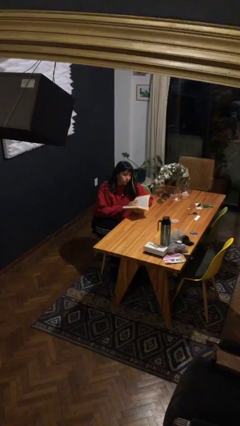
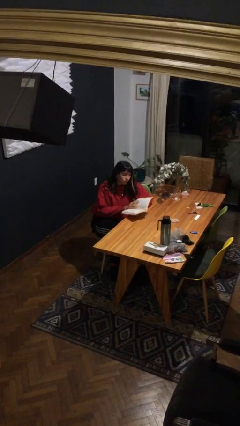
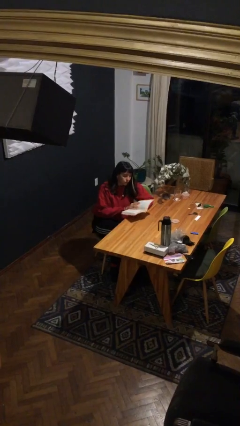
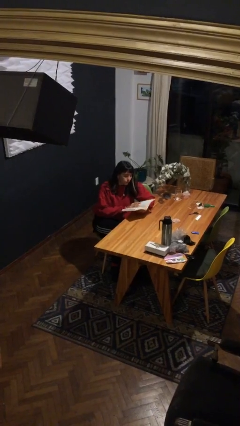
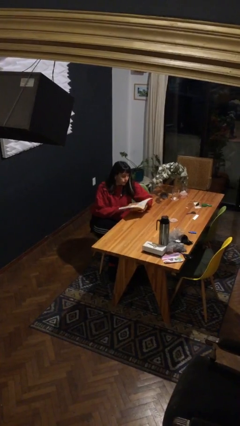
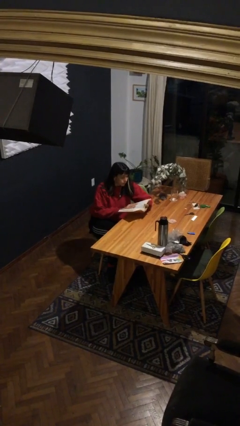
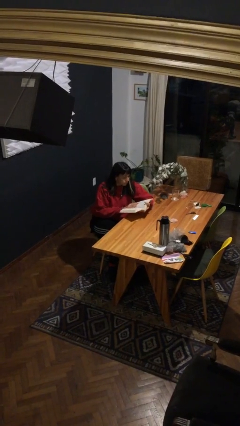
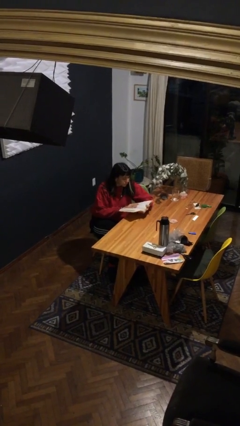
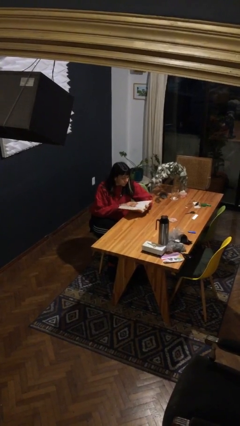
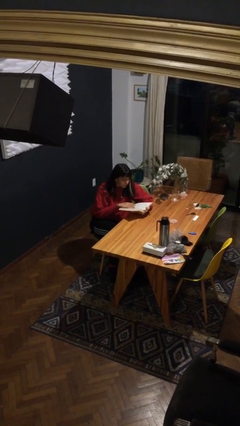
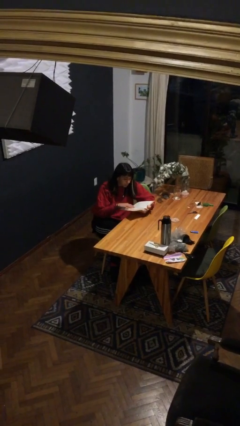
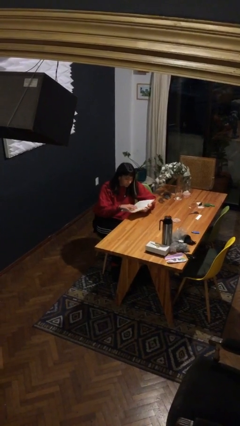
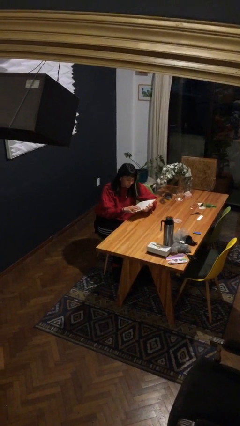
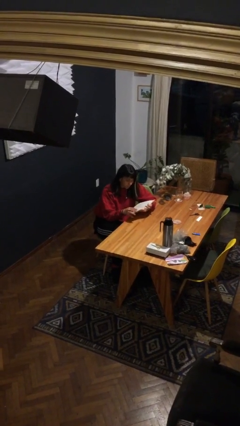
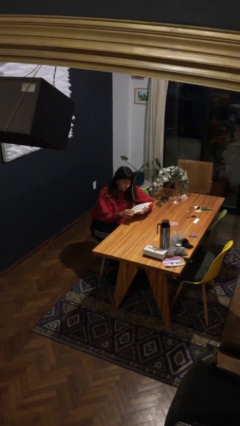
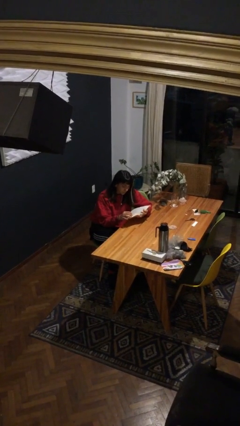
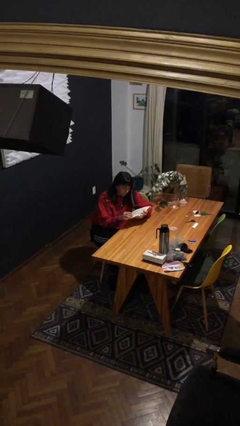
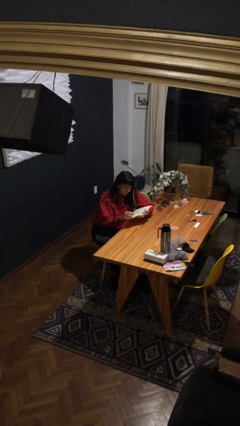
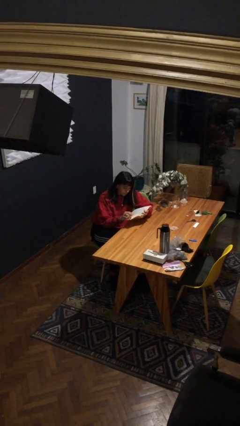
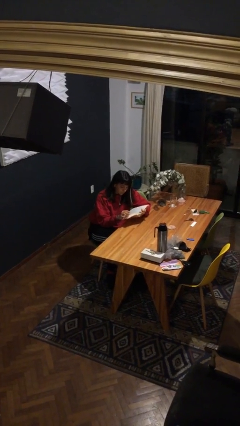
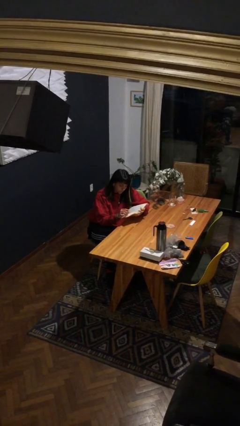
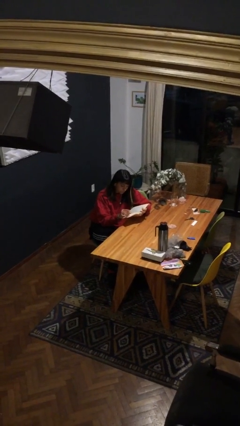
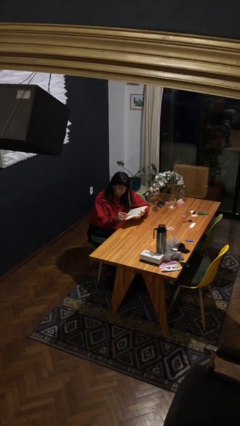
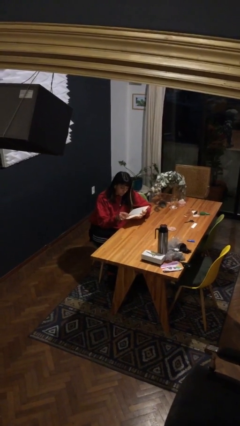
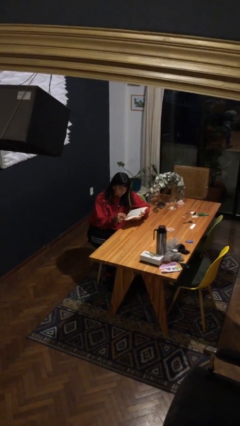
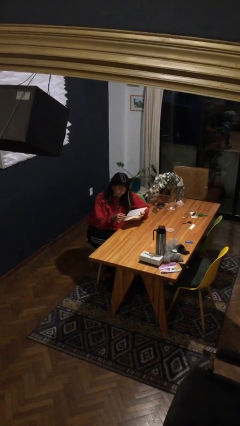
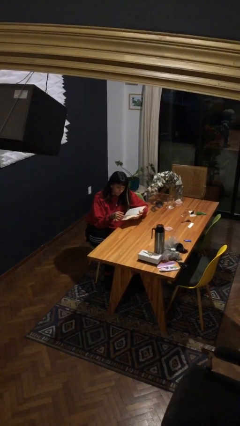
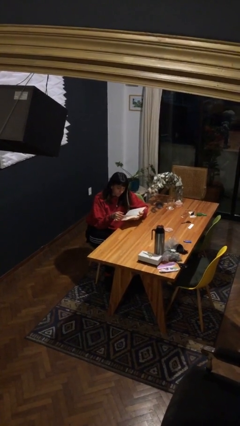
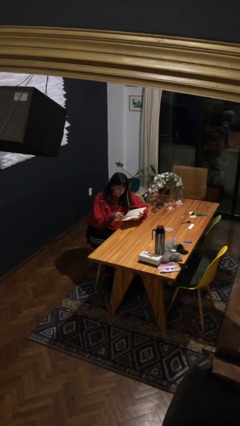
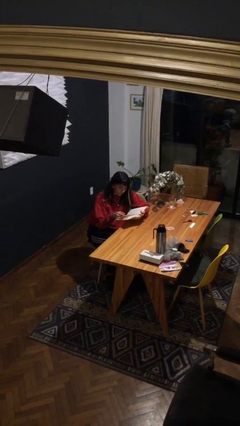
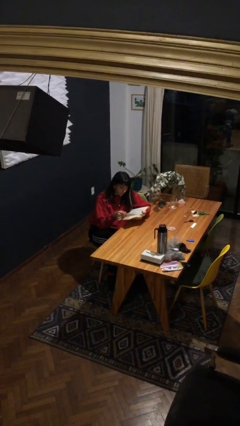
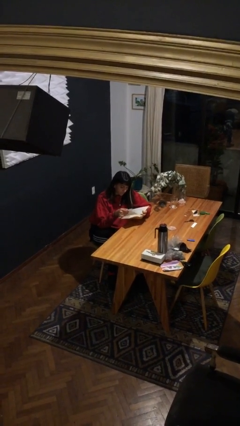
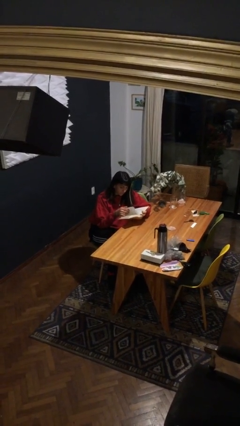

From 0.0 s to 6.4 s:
person reads document

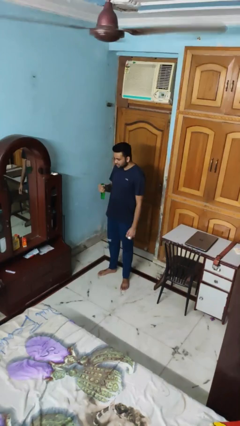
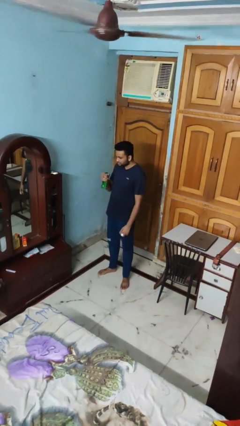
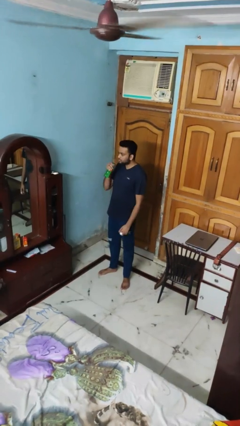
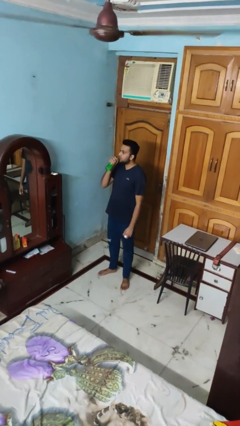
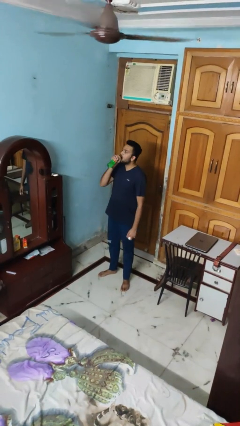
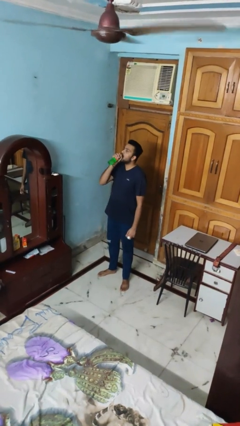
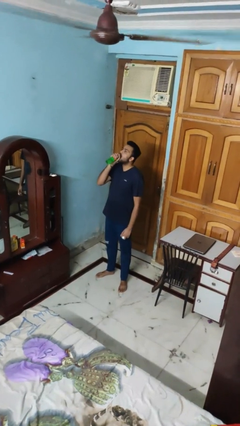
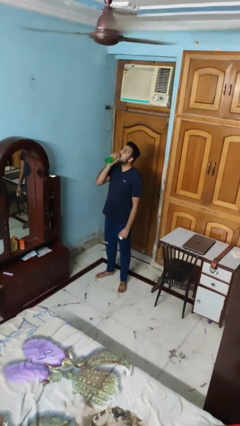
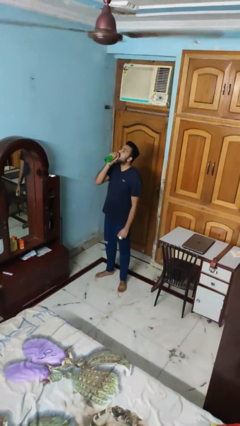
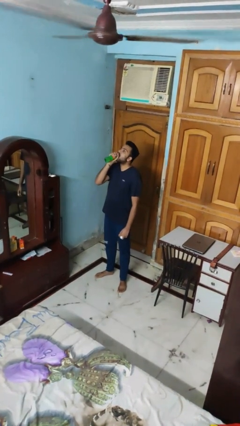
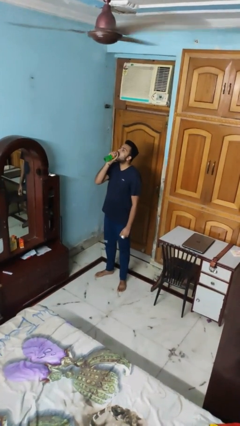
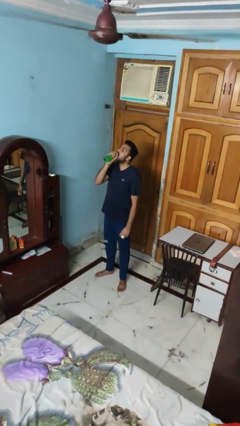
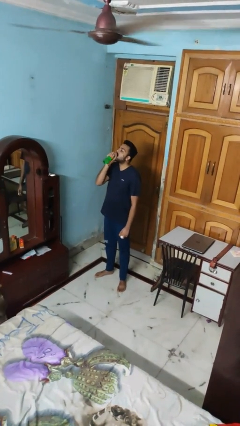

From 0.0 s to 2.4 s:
person drinks from bottle

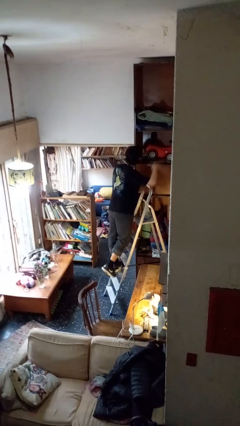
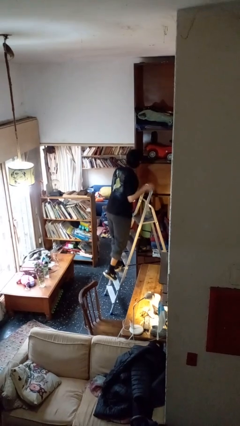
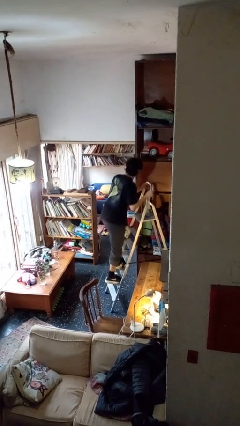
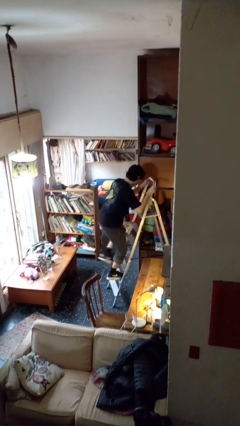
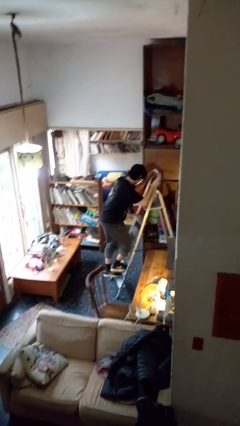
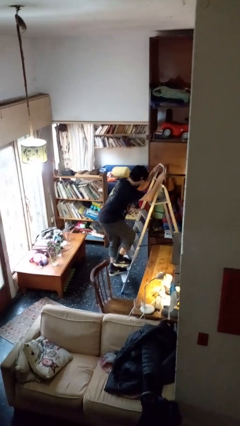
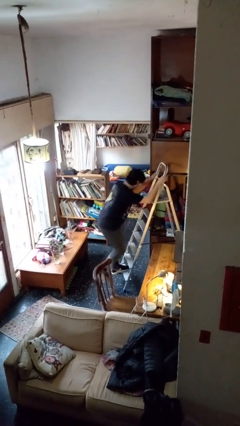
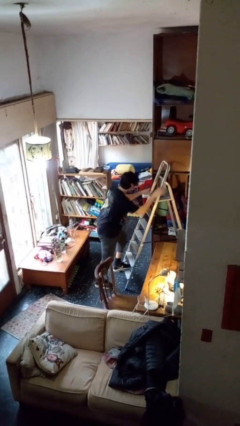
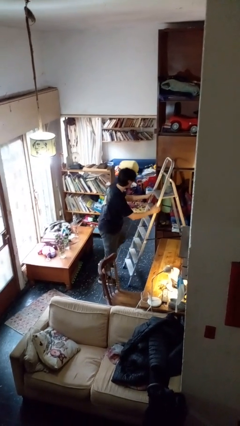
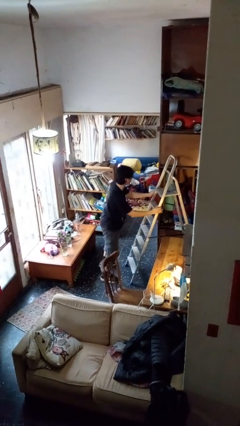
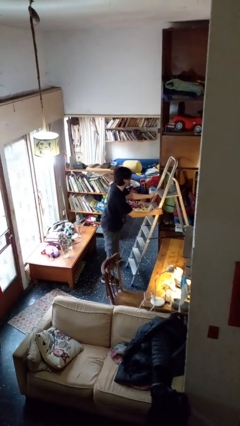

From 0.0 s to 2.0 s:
person climbs down ladder

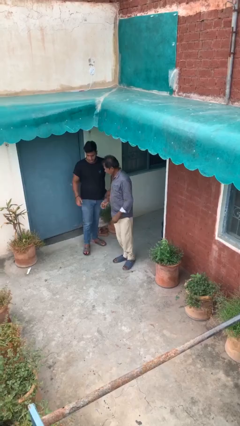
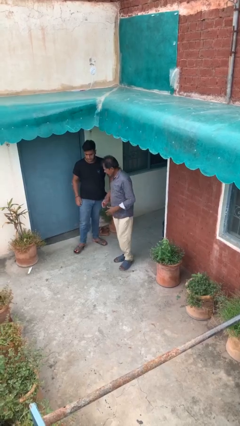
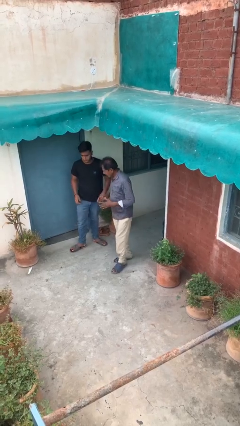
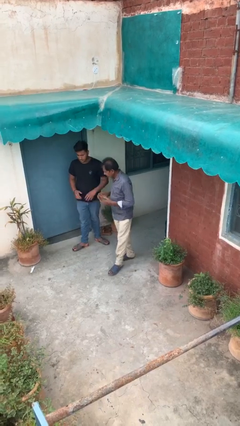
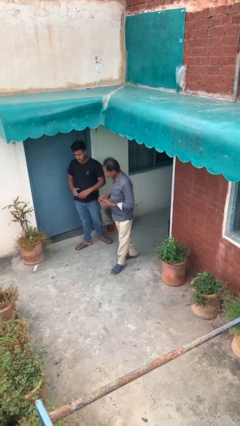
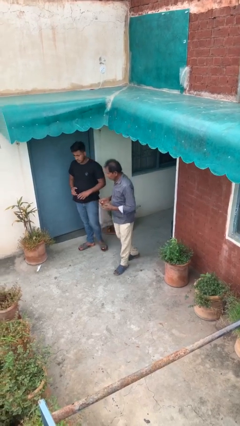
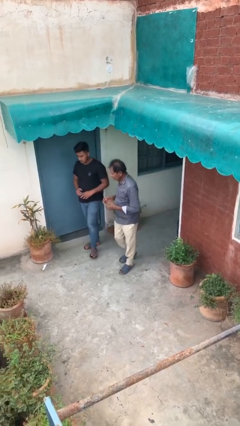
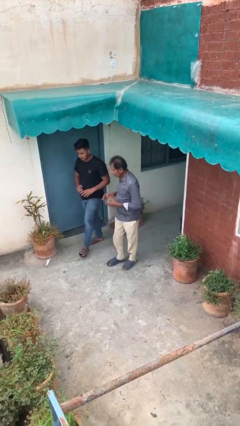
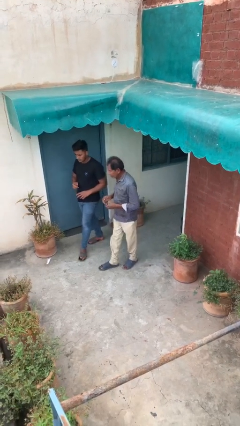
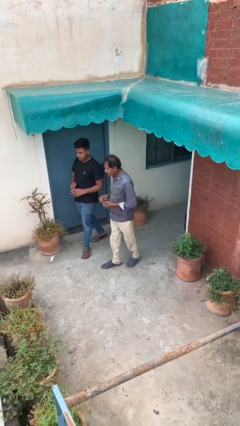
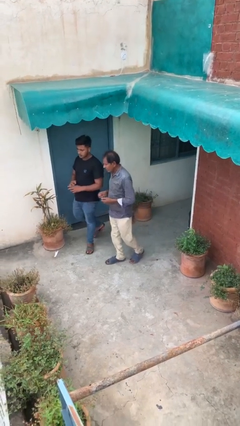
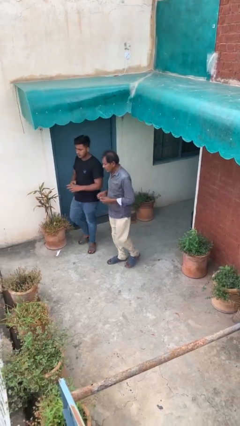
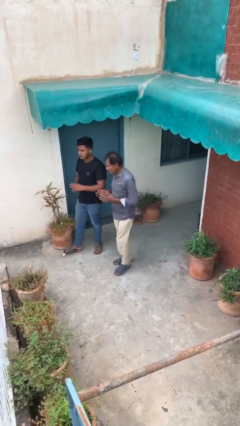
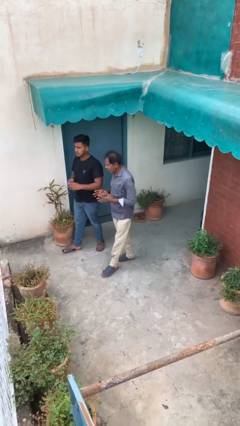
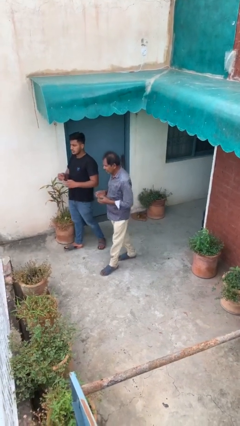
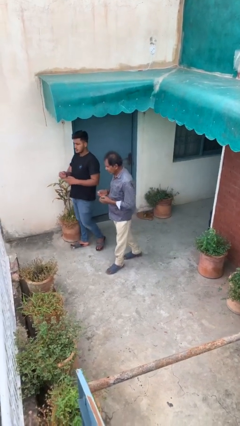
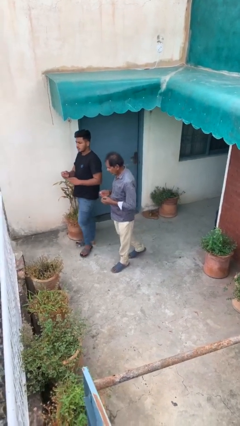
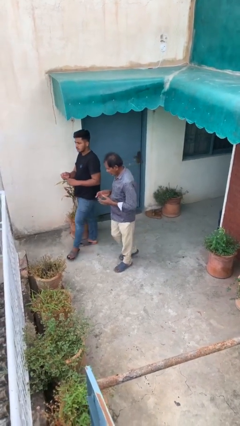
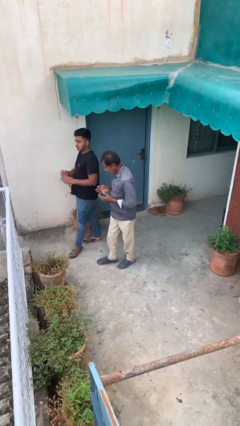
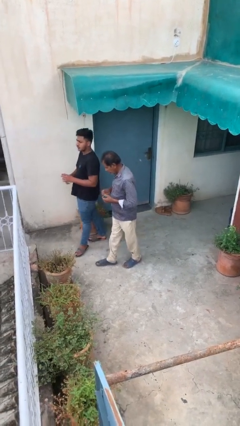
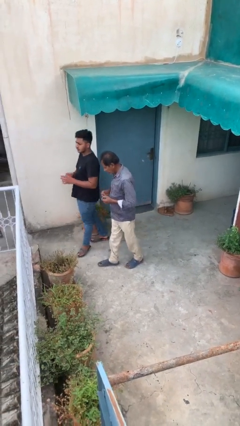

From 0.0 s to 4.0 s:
person talks to person

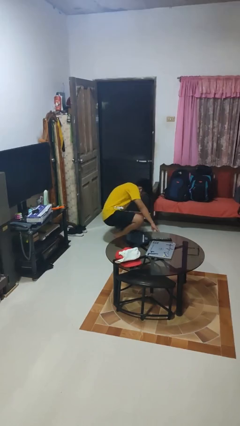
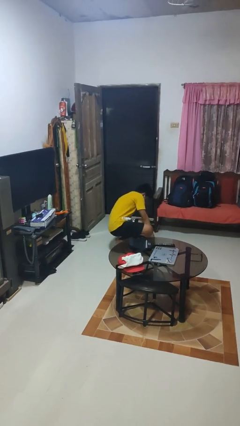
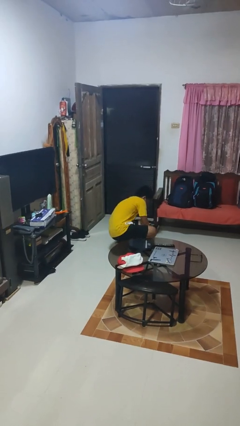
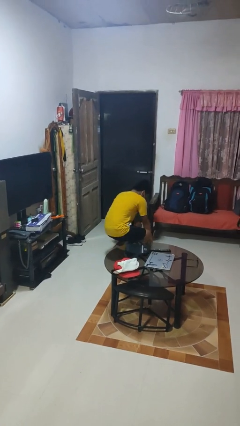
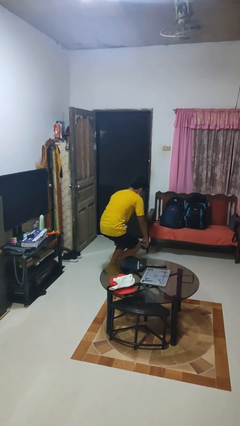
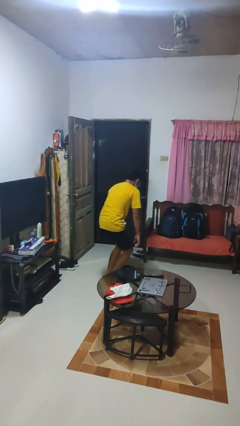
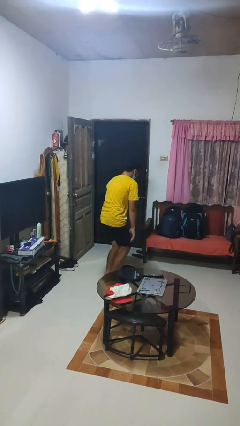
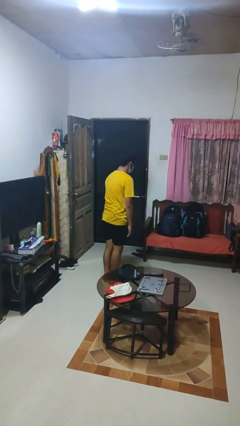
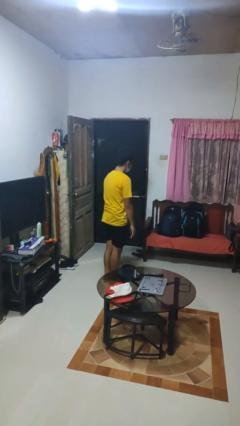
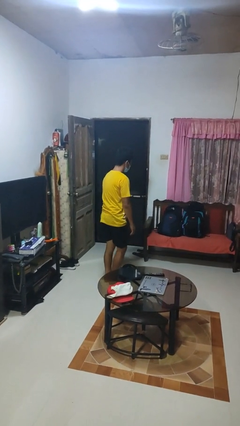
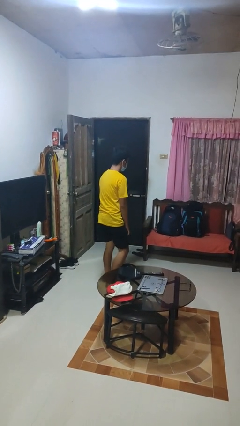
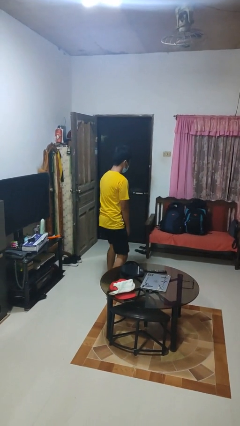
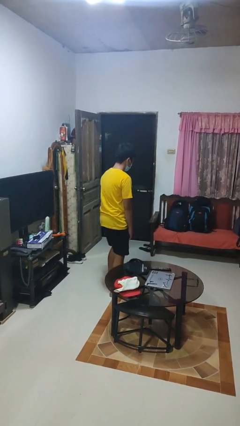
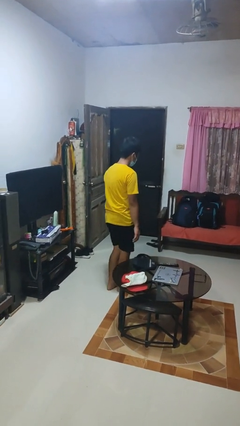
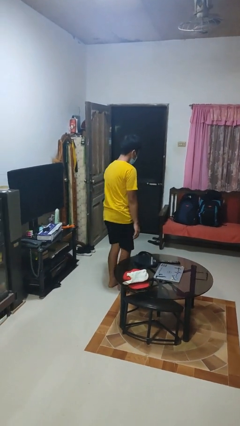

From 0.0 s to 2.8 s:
person stands up from floor
